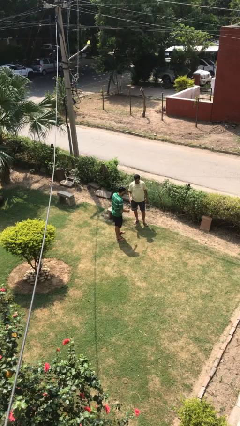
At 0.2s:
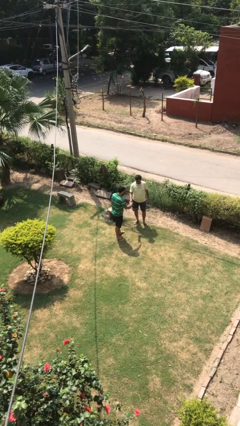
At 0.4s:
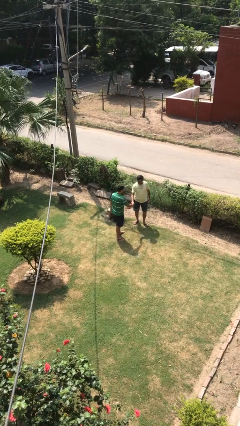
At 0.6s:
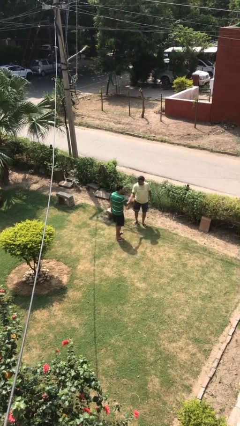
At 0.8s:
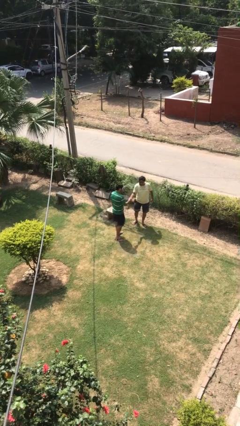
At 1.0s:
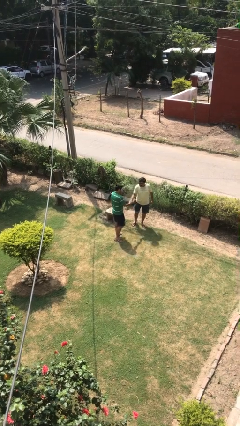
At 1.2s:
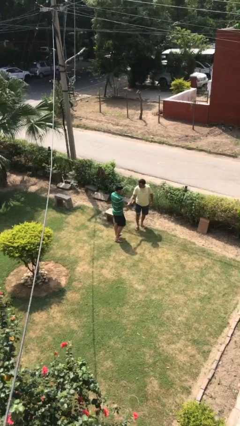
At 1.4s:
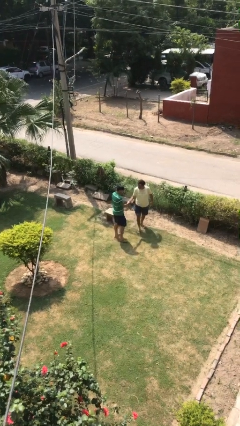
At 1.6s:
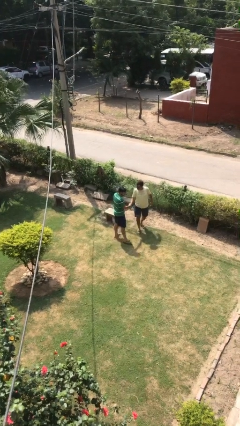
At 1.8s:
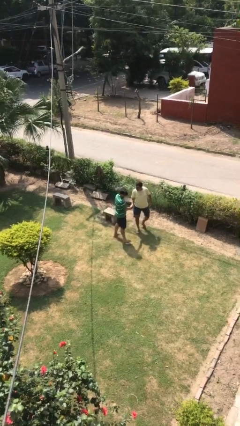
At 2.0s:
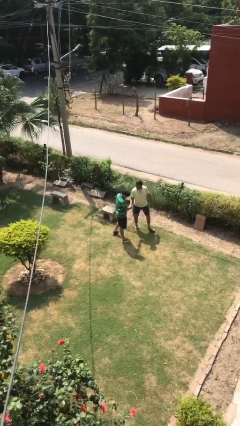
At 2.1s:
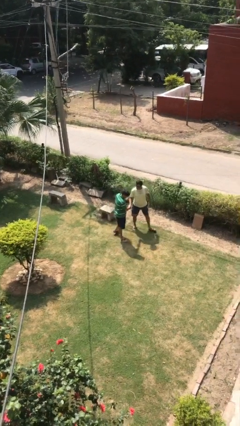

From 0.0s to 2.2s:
person shakes hand

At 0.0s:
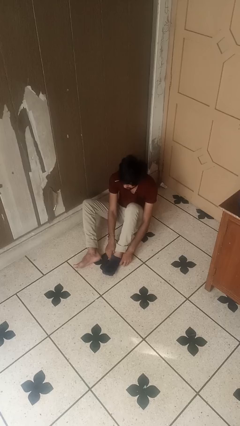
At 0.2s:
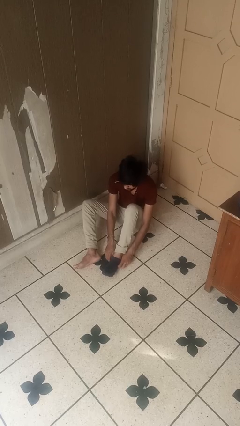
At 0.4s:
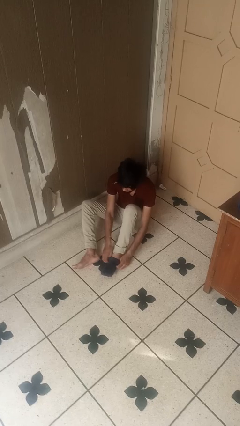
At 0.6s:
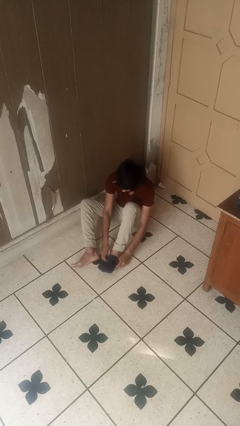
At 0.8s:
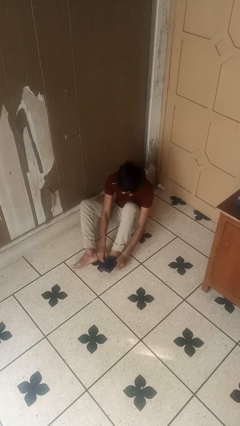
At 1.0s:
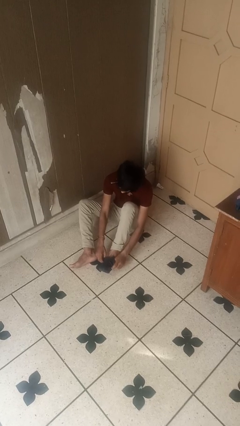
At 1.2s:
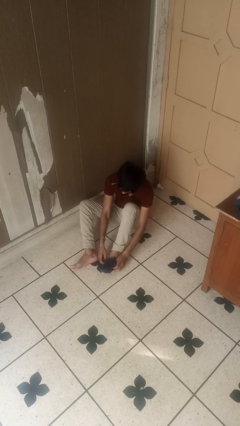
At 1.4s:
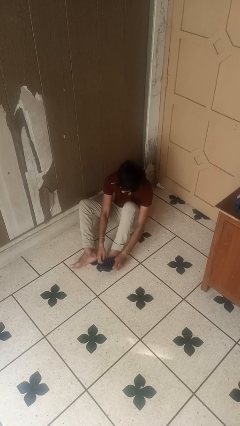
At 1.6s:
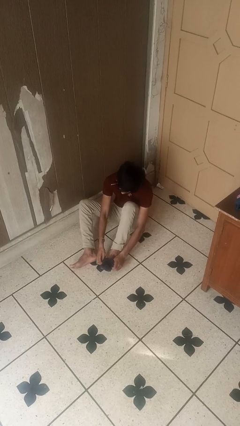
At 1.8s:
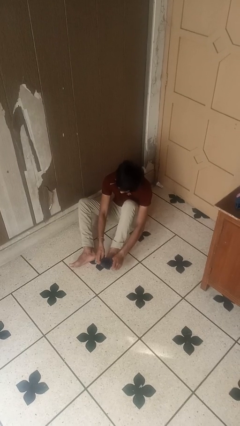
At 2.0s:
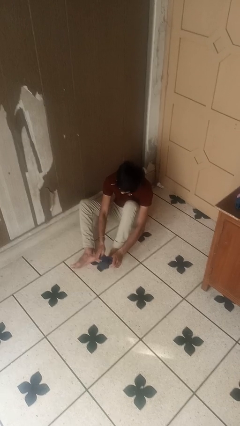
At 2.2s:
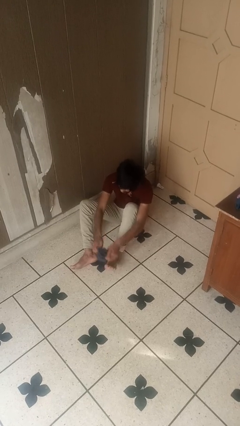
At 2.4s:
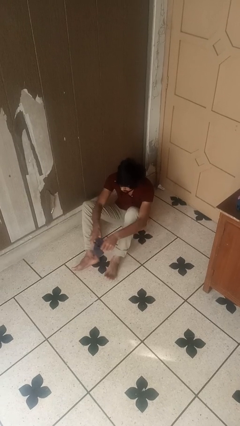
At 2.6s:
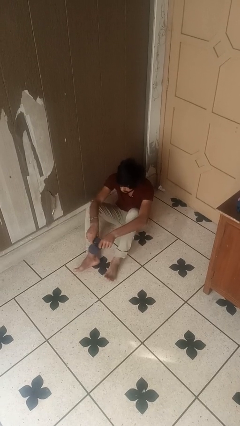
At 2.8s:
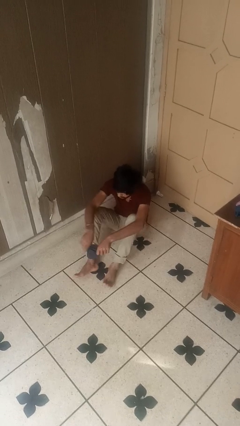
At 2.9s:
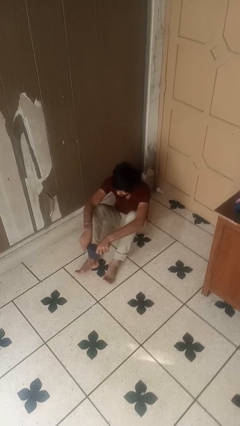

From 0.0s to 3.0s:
person takes off socks

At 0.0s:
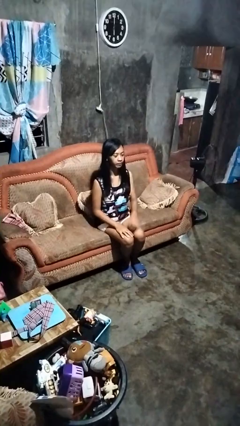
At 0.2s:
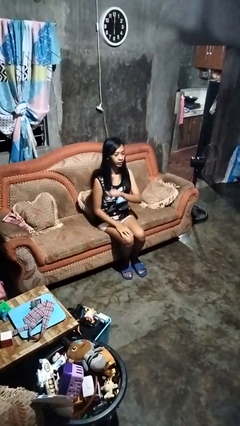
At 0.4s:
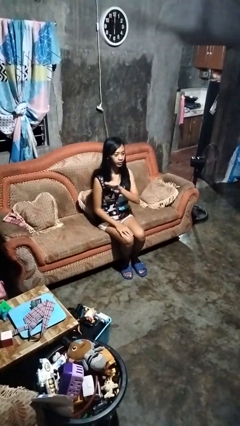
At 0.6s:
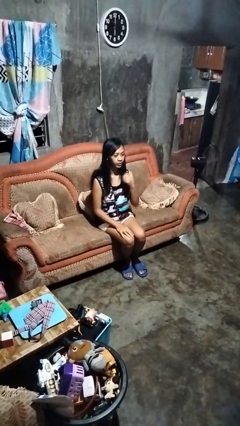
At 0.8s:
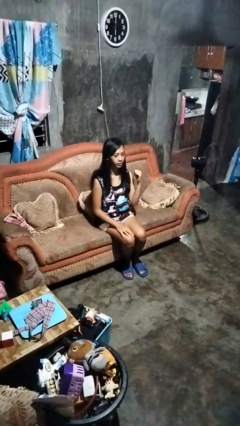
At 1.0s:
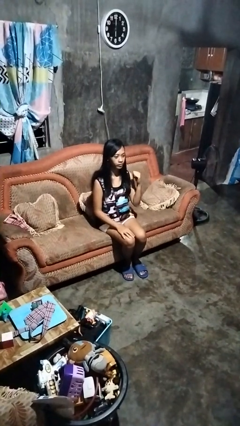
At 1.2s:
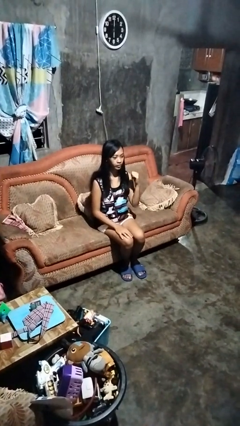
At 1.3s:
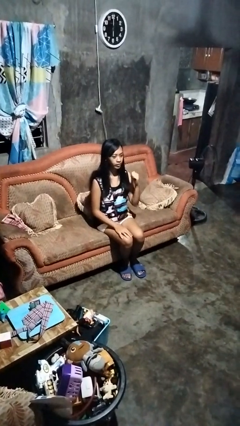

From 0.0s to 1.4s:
person gestures cut

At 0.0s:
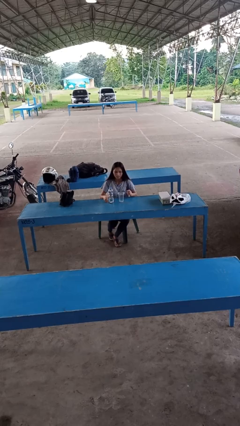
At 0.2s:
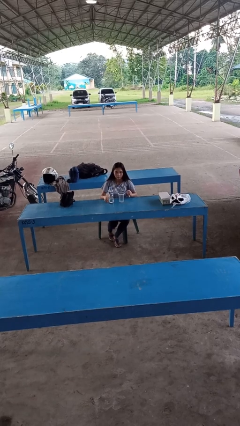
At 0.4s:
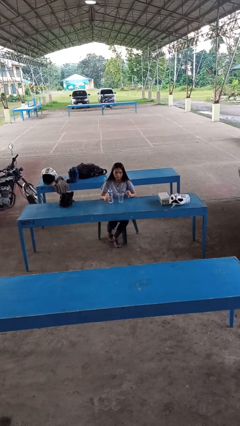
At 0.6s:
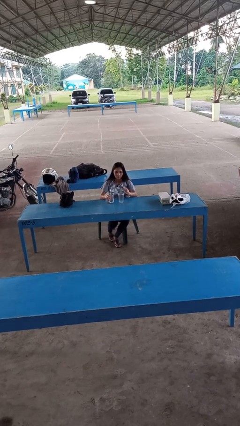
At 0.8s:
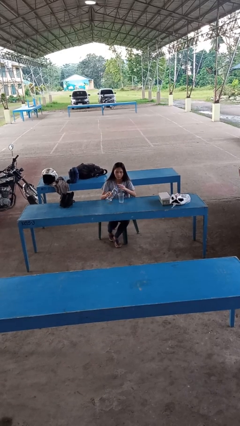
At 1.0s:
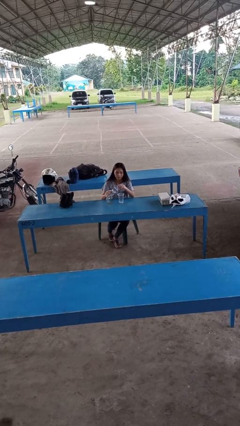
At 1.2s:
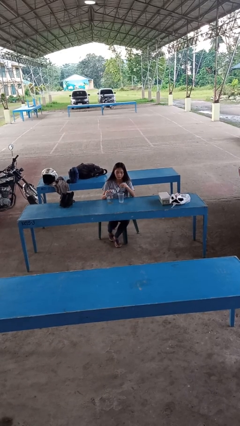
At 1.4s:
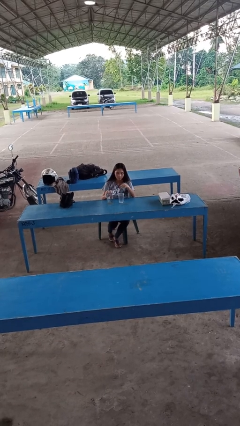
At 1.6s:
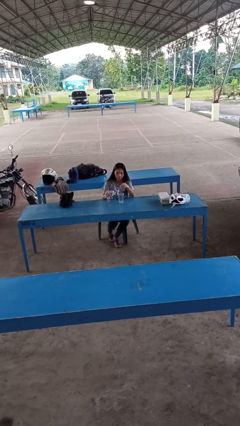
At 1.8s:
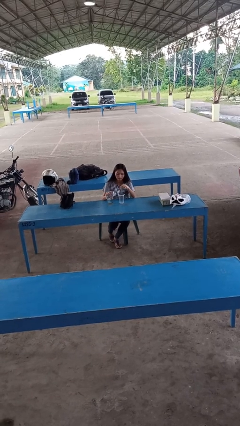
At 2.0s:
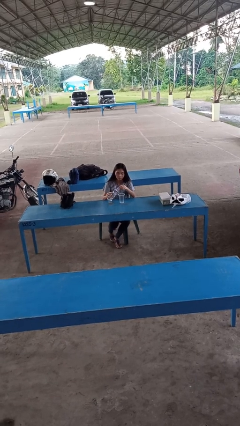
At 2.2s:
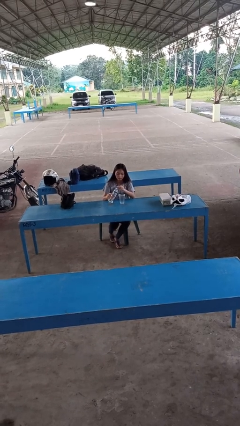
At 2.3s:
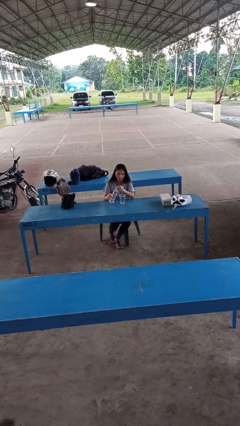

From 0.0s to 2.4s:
person pours liquid into cup

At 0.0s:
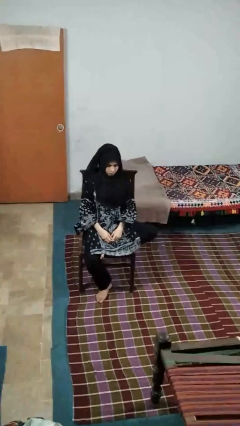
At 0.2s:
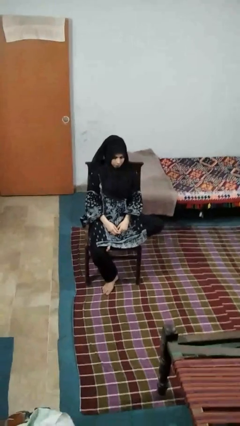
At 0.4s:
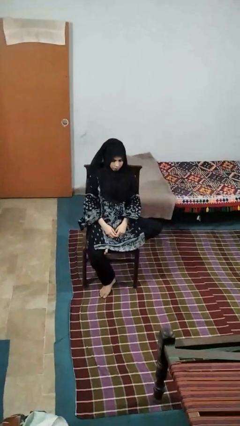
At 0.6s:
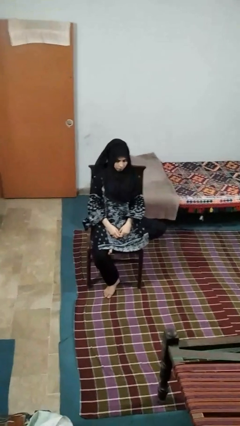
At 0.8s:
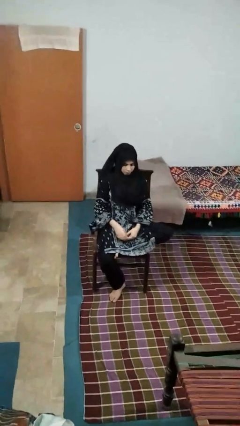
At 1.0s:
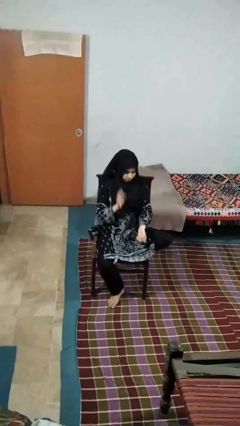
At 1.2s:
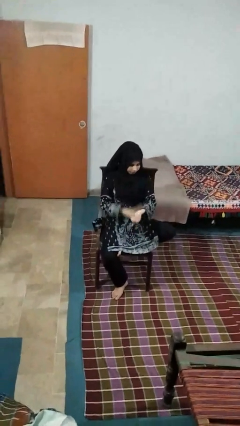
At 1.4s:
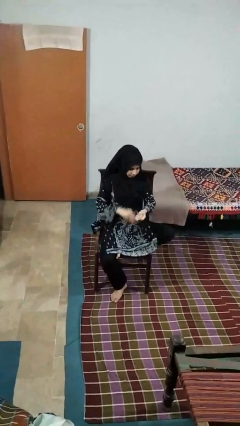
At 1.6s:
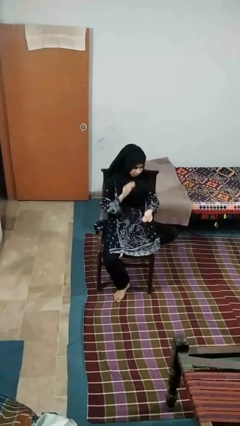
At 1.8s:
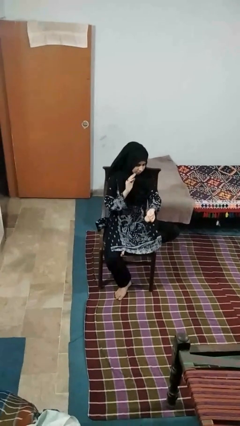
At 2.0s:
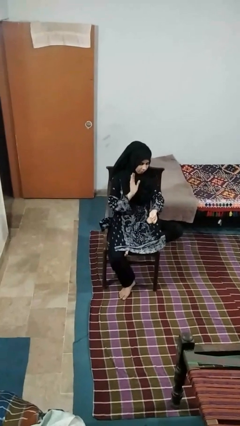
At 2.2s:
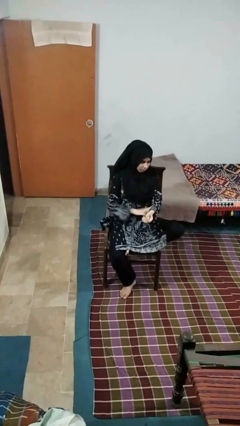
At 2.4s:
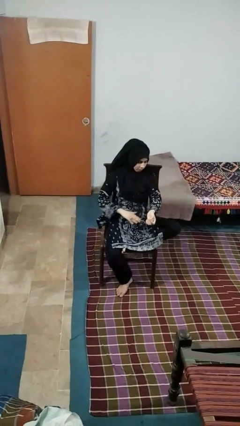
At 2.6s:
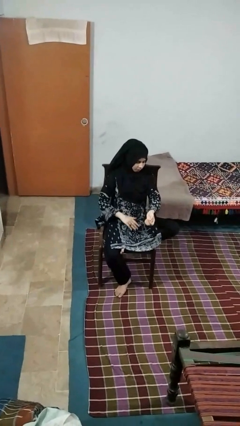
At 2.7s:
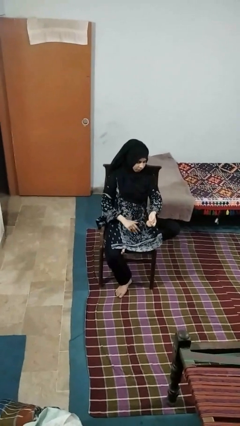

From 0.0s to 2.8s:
person swats bug

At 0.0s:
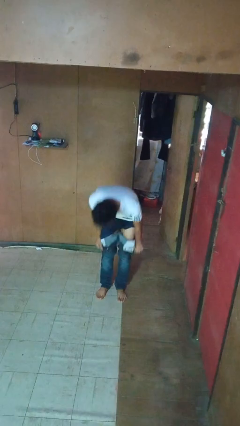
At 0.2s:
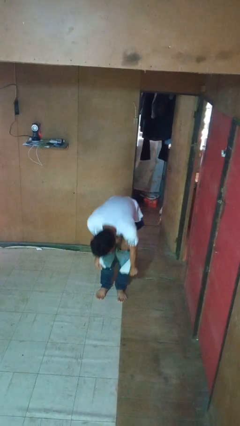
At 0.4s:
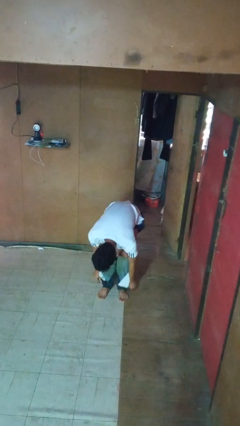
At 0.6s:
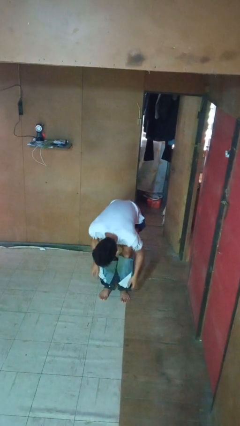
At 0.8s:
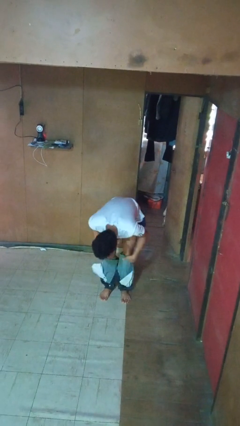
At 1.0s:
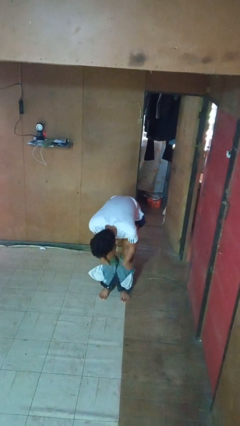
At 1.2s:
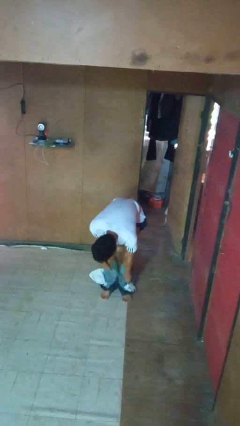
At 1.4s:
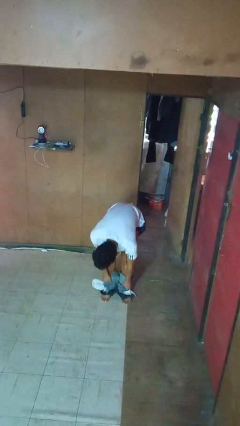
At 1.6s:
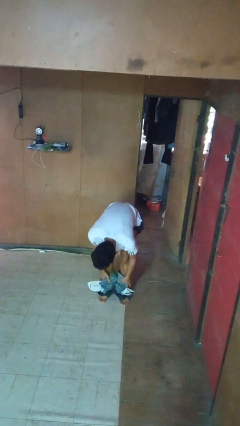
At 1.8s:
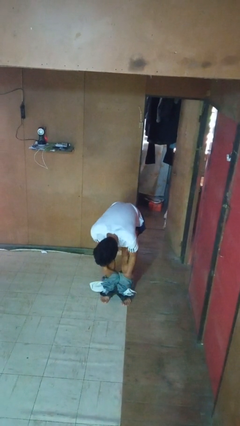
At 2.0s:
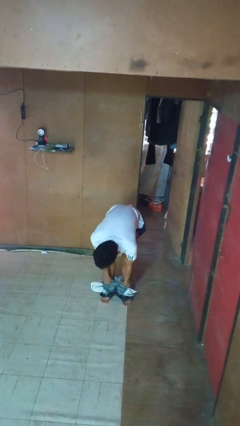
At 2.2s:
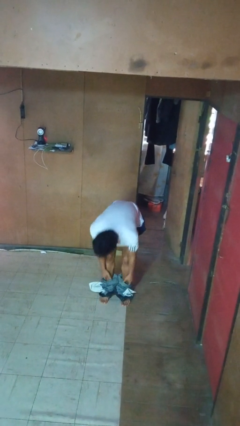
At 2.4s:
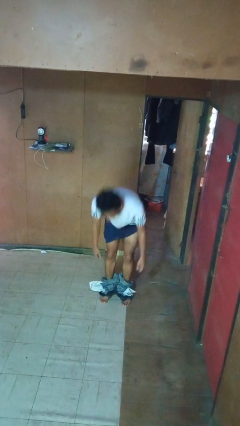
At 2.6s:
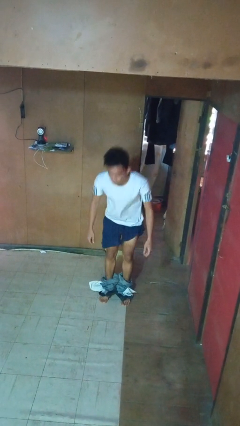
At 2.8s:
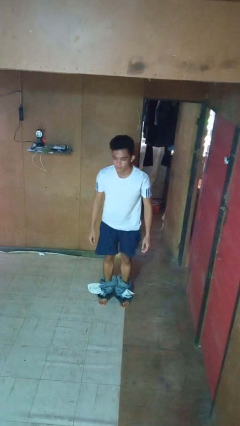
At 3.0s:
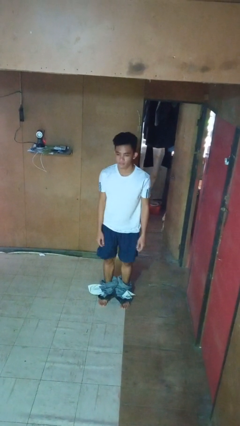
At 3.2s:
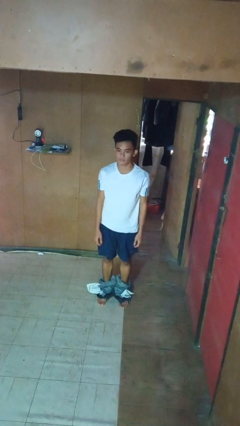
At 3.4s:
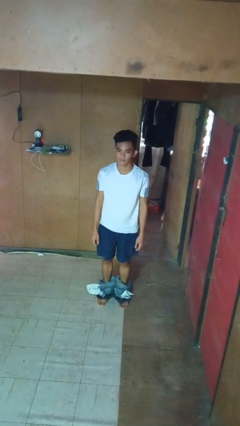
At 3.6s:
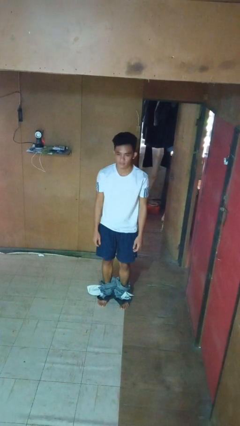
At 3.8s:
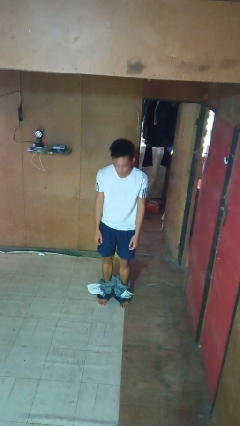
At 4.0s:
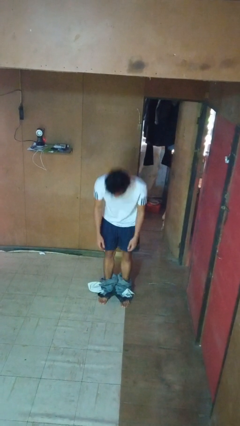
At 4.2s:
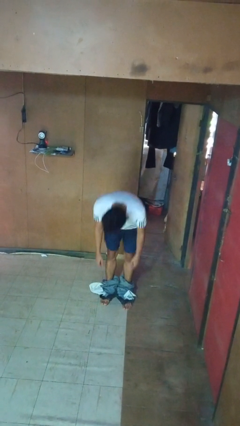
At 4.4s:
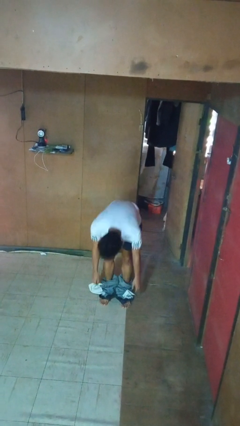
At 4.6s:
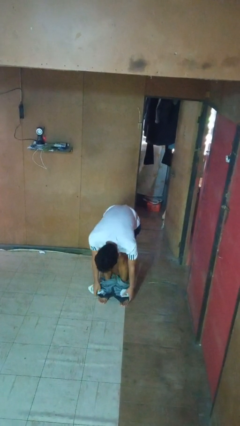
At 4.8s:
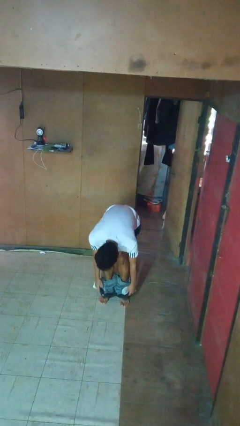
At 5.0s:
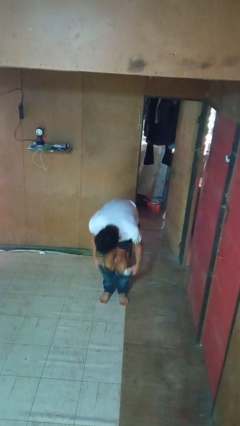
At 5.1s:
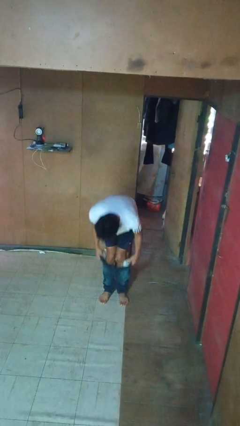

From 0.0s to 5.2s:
person takes off pants
